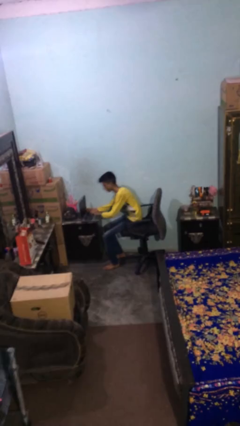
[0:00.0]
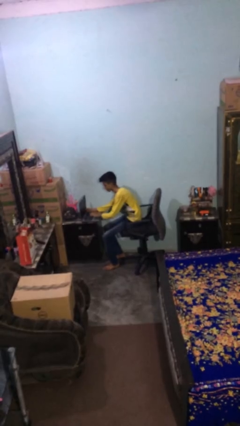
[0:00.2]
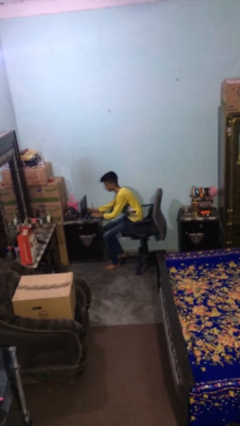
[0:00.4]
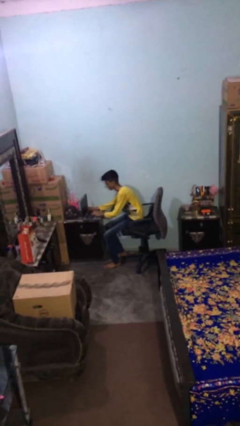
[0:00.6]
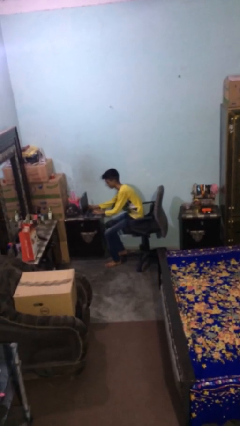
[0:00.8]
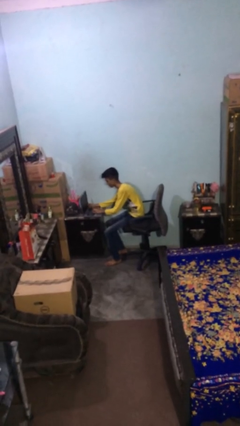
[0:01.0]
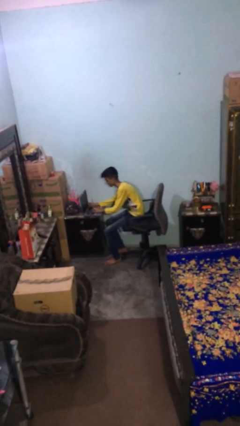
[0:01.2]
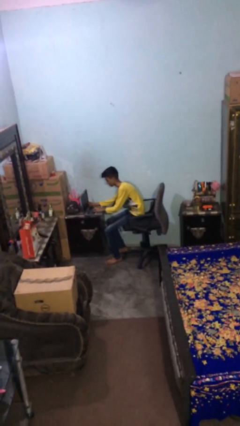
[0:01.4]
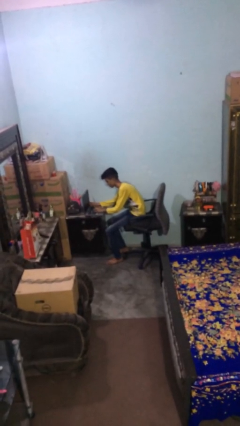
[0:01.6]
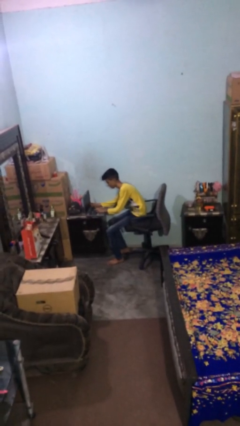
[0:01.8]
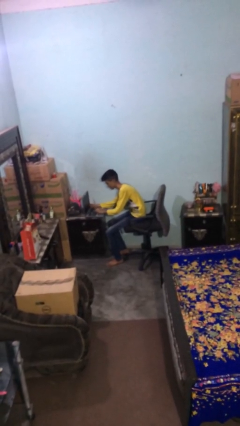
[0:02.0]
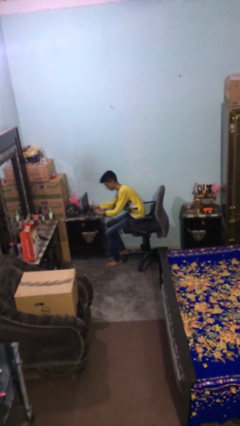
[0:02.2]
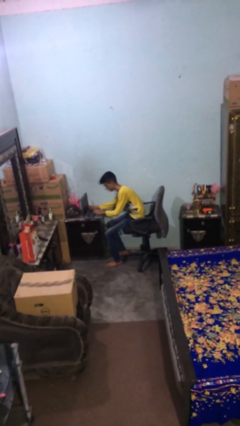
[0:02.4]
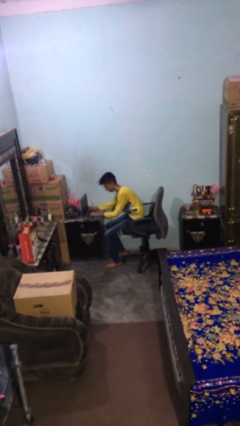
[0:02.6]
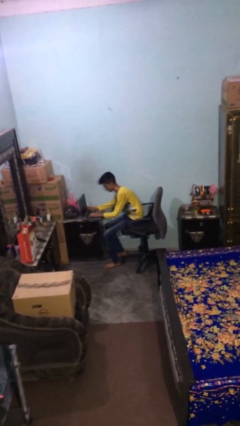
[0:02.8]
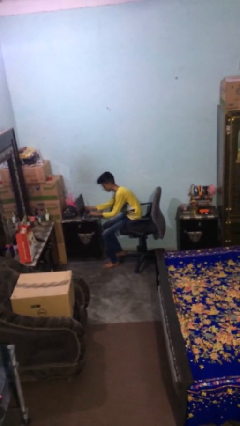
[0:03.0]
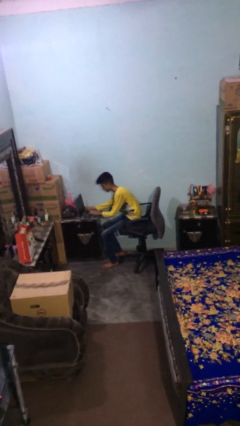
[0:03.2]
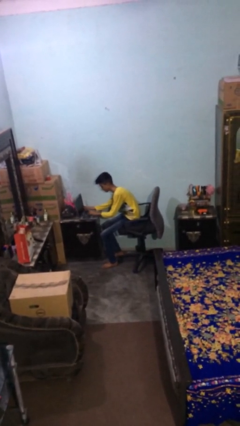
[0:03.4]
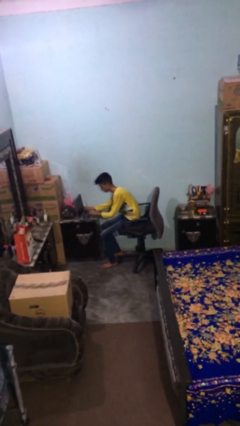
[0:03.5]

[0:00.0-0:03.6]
person interacts with laptop

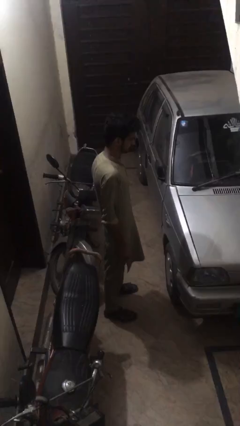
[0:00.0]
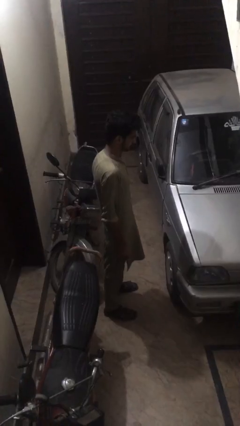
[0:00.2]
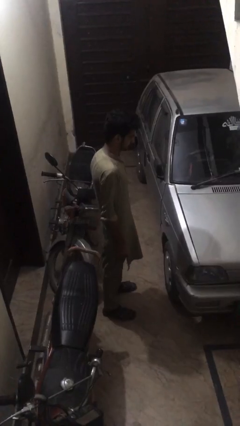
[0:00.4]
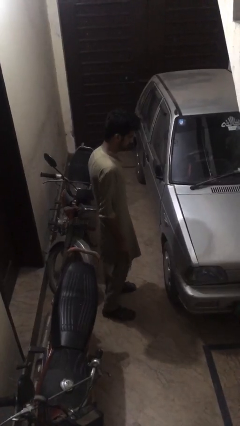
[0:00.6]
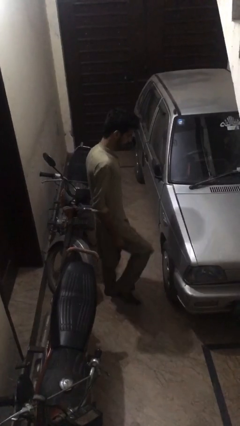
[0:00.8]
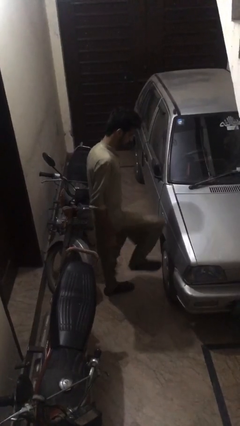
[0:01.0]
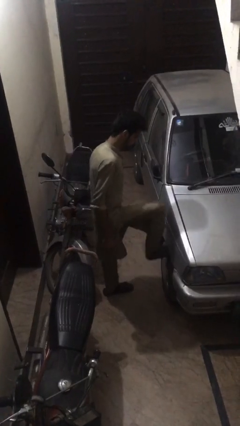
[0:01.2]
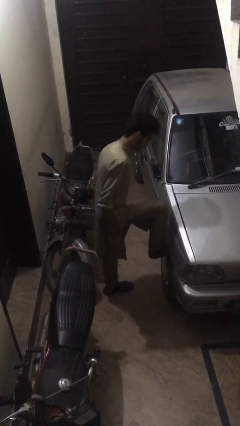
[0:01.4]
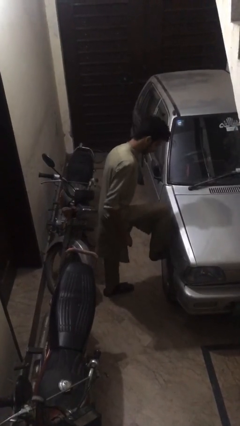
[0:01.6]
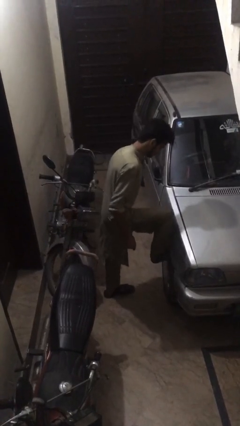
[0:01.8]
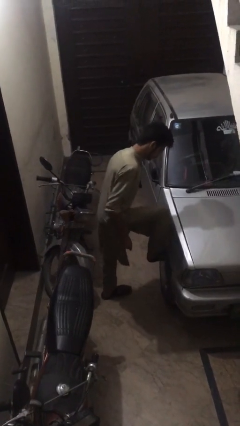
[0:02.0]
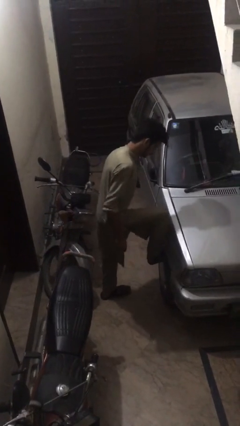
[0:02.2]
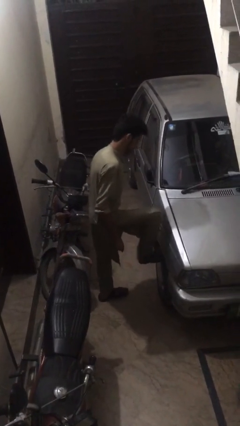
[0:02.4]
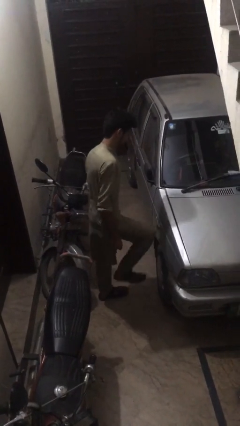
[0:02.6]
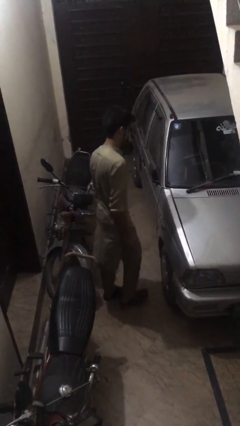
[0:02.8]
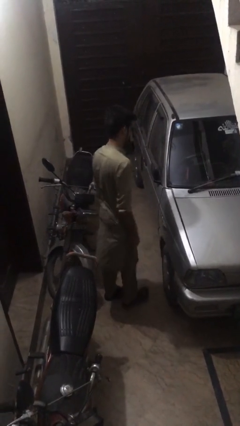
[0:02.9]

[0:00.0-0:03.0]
person kicks car tires

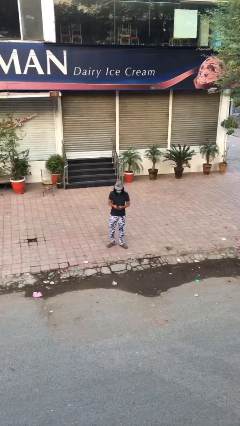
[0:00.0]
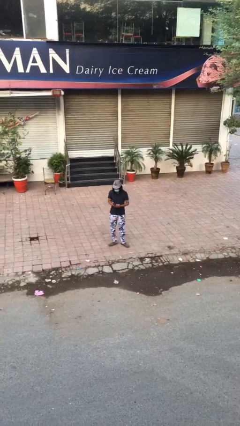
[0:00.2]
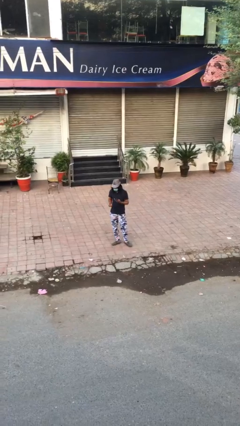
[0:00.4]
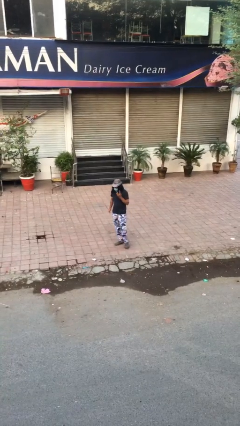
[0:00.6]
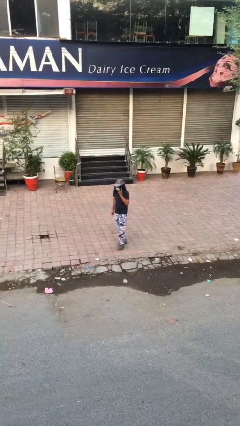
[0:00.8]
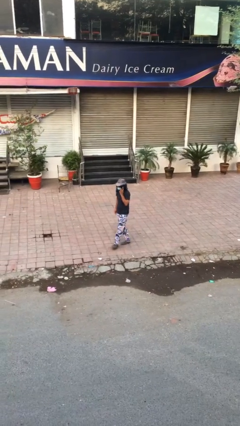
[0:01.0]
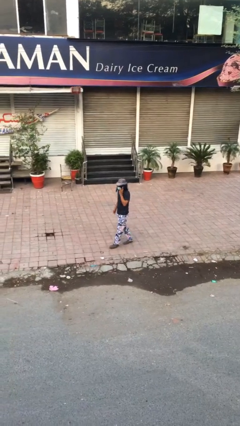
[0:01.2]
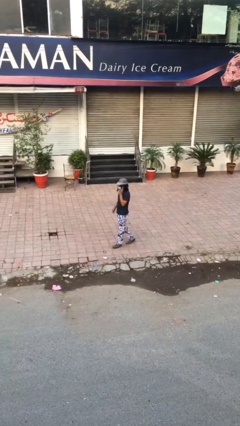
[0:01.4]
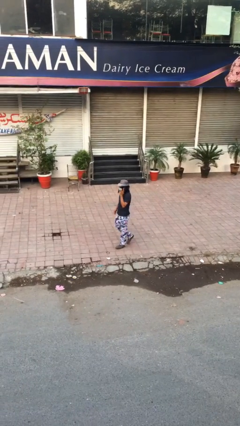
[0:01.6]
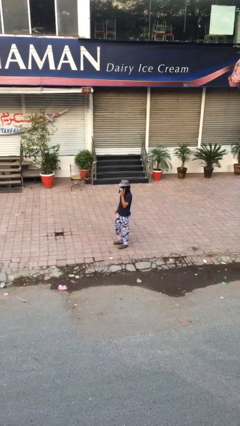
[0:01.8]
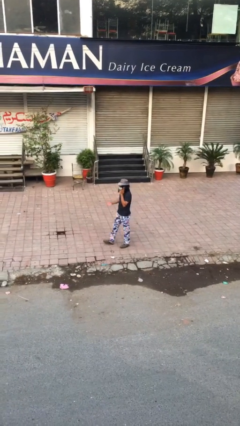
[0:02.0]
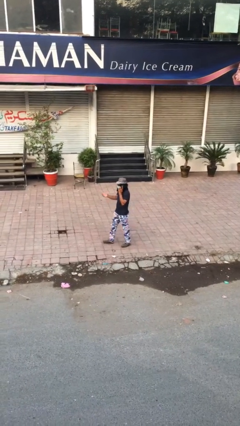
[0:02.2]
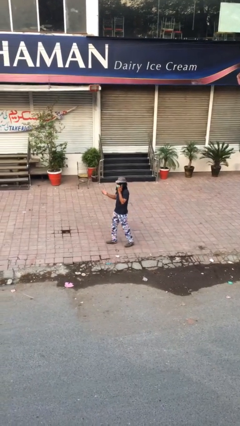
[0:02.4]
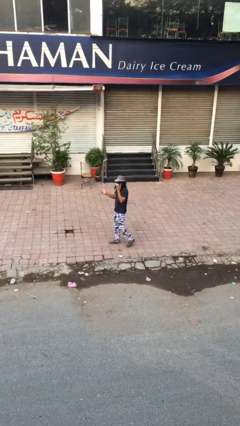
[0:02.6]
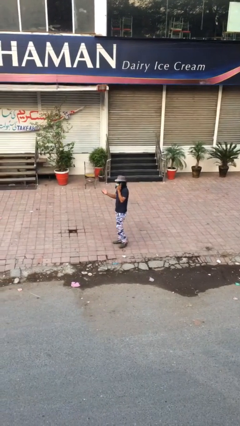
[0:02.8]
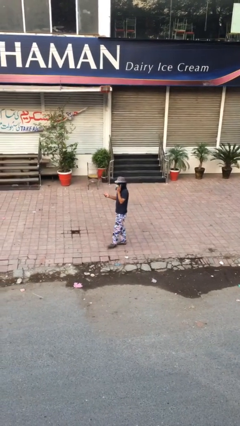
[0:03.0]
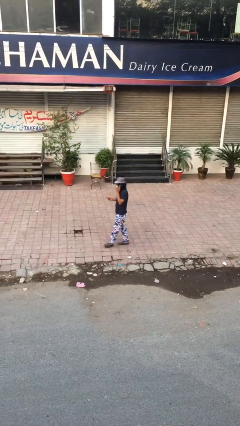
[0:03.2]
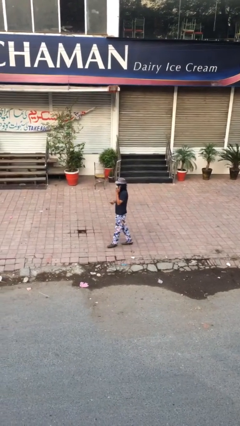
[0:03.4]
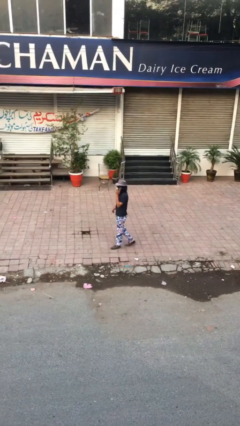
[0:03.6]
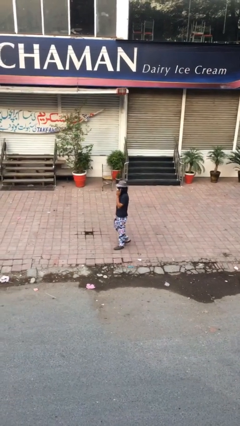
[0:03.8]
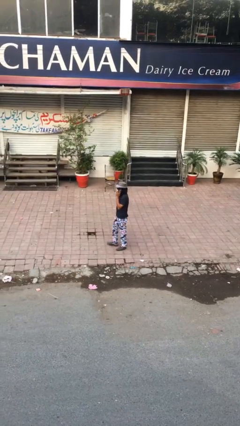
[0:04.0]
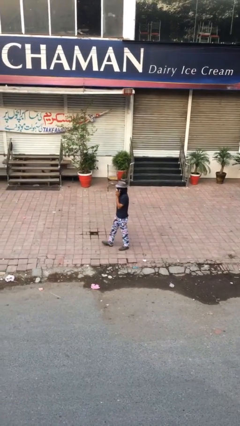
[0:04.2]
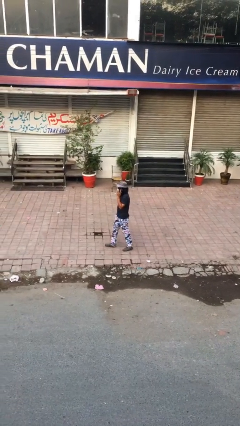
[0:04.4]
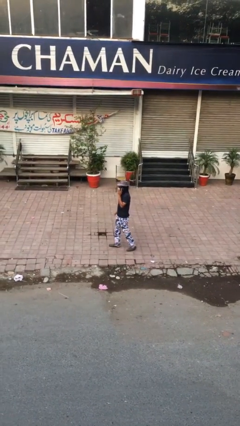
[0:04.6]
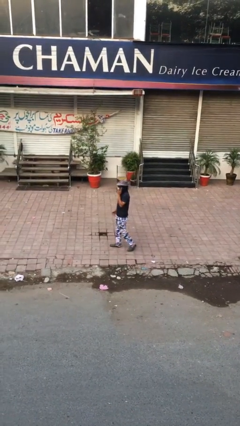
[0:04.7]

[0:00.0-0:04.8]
person talks on phone

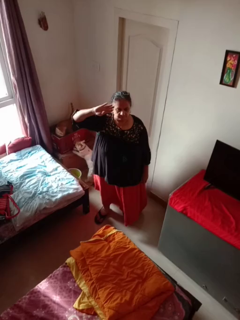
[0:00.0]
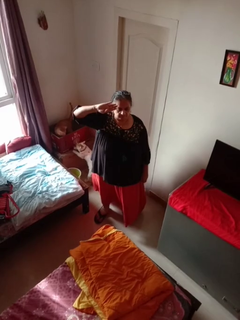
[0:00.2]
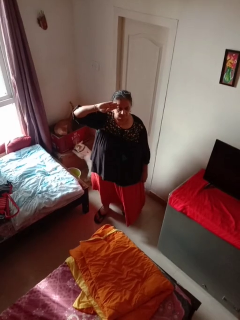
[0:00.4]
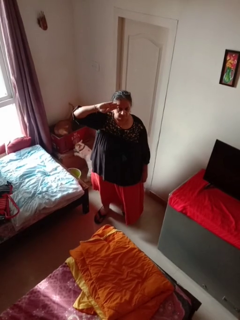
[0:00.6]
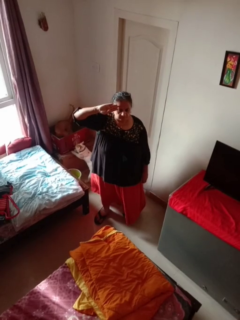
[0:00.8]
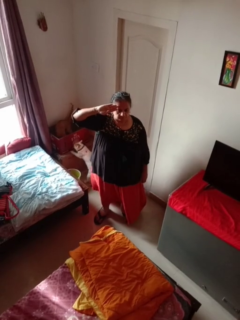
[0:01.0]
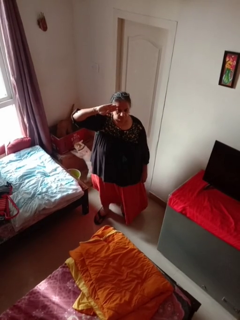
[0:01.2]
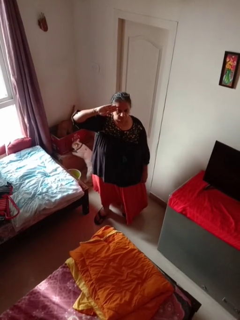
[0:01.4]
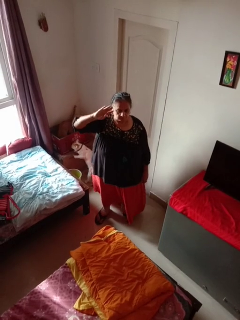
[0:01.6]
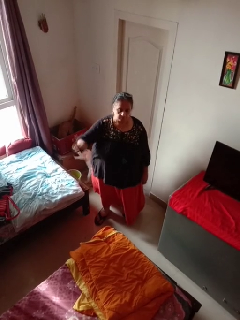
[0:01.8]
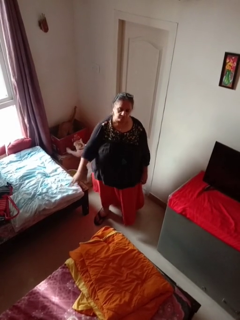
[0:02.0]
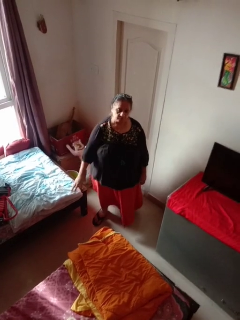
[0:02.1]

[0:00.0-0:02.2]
person salutes

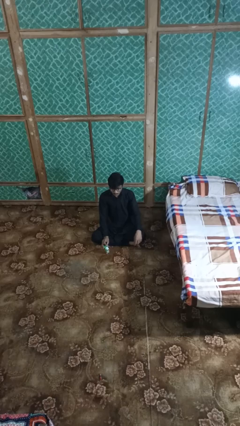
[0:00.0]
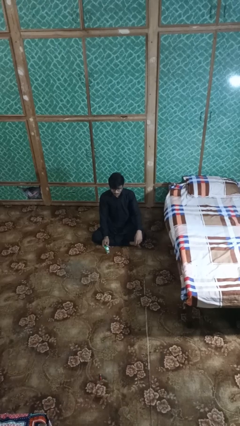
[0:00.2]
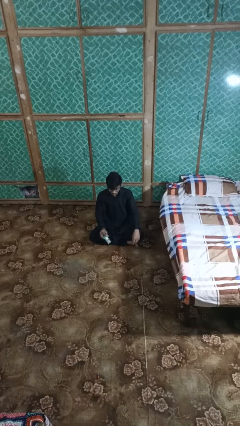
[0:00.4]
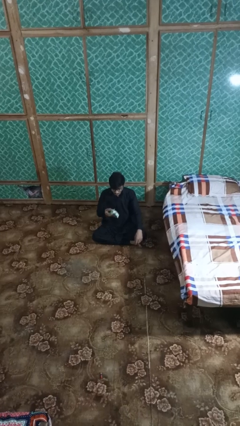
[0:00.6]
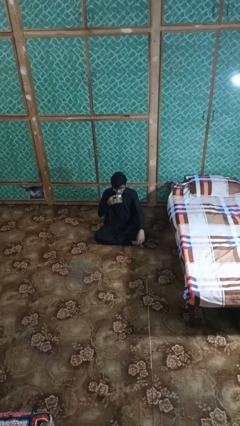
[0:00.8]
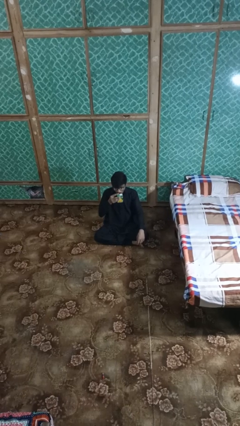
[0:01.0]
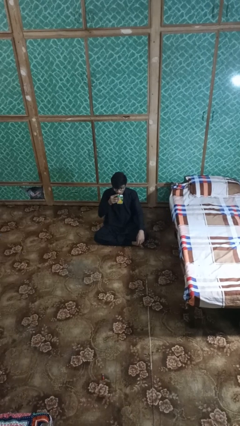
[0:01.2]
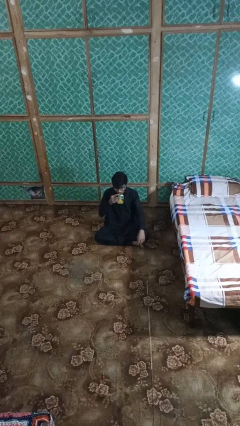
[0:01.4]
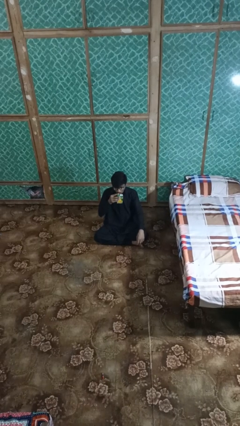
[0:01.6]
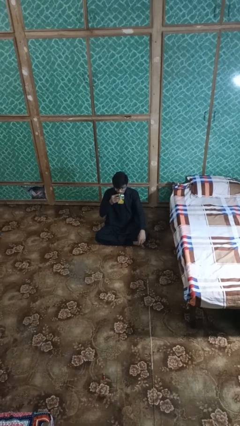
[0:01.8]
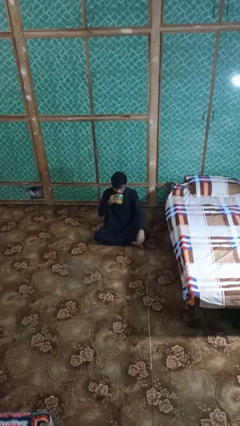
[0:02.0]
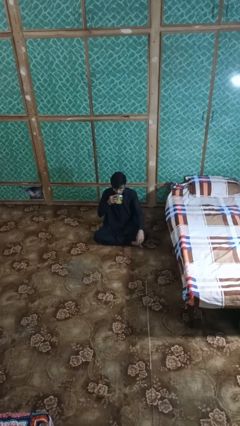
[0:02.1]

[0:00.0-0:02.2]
person drinks from straw

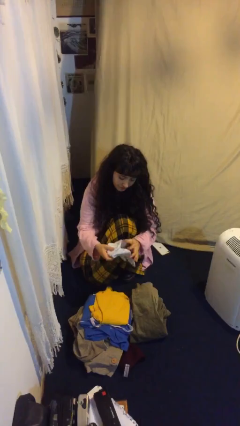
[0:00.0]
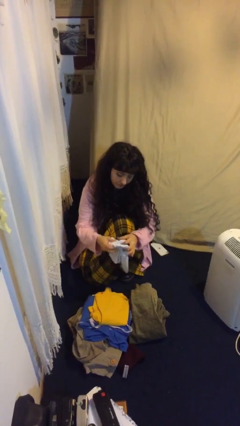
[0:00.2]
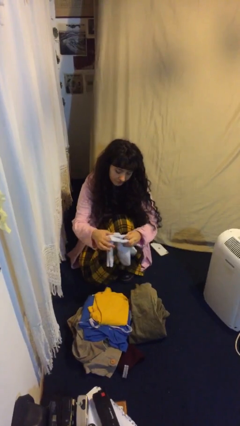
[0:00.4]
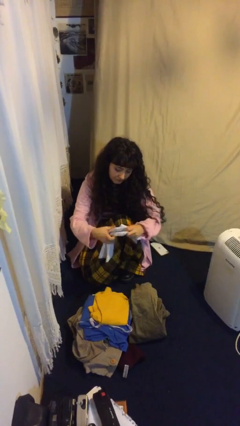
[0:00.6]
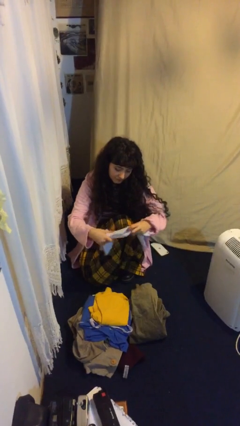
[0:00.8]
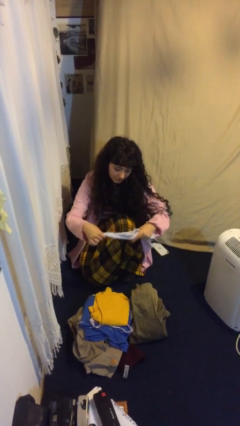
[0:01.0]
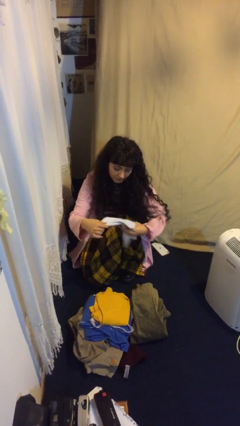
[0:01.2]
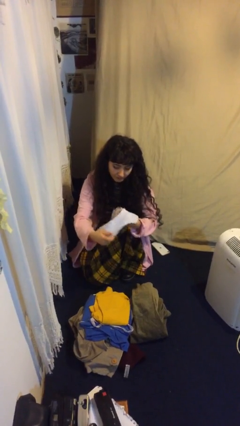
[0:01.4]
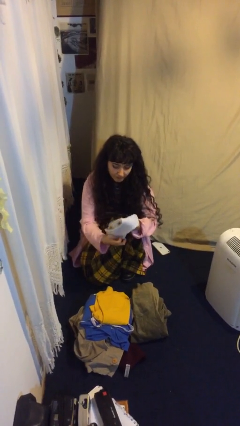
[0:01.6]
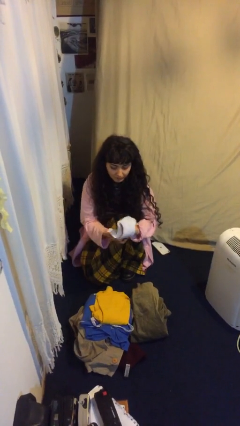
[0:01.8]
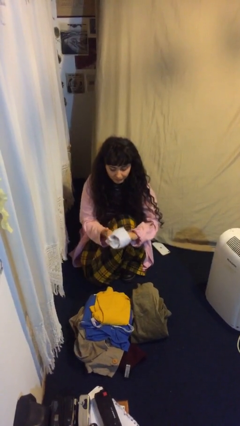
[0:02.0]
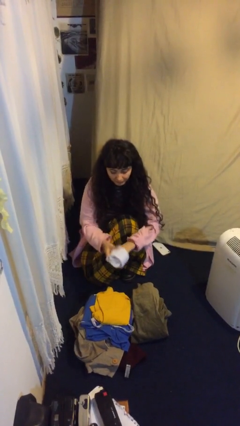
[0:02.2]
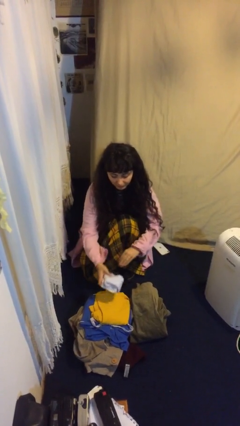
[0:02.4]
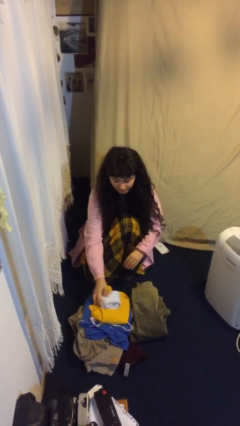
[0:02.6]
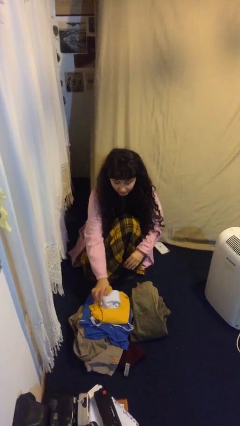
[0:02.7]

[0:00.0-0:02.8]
person folds socks
